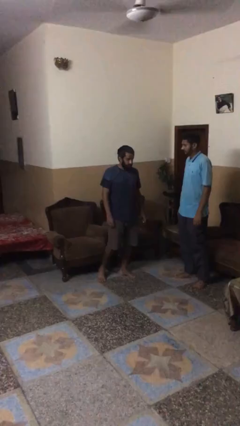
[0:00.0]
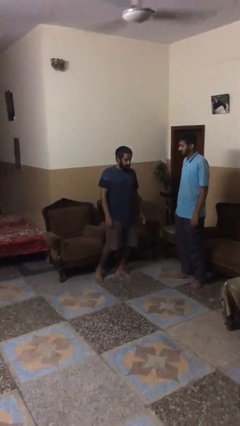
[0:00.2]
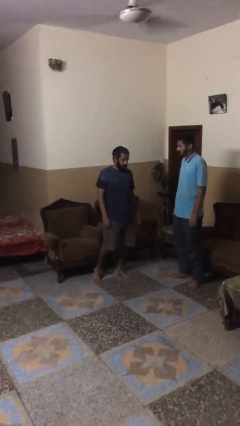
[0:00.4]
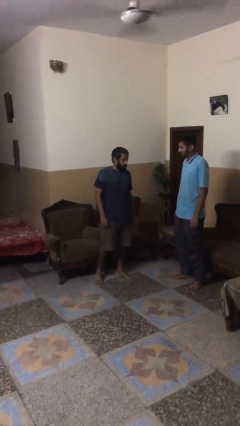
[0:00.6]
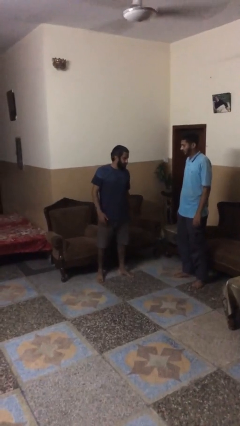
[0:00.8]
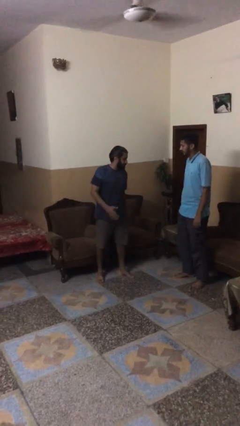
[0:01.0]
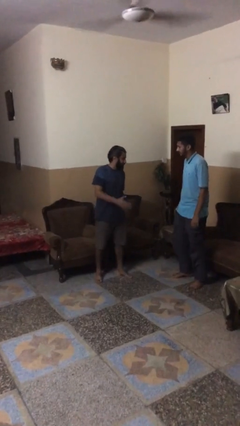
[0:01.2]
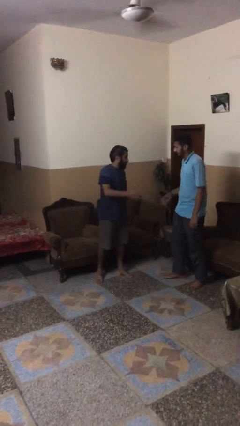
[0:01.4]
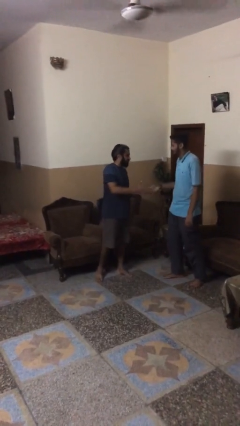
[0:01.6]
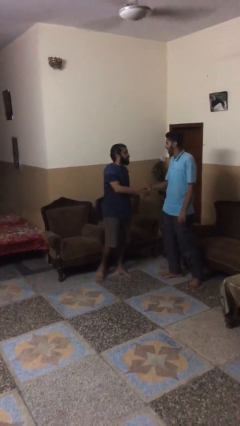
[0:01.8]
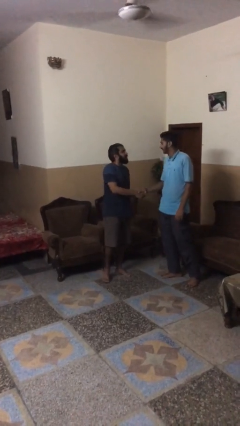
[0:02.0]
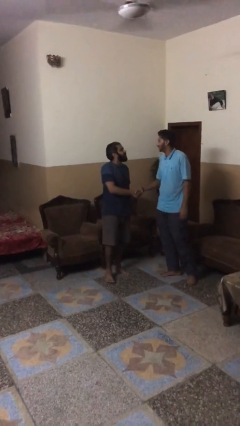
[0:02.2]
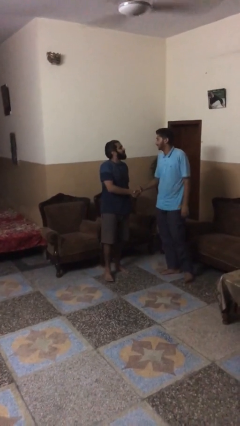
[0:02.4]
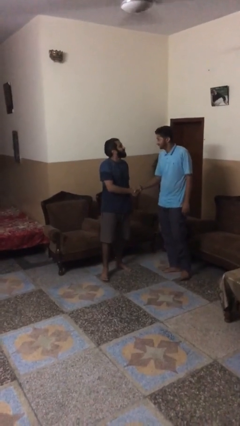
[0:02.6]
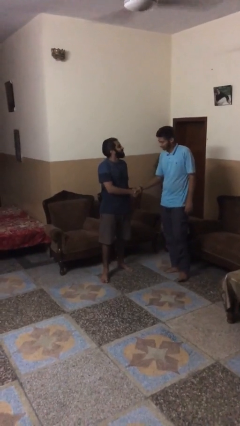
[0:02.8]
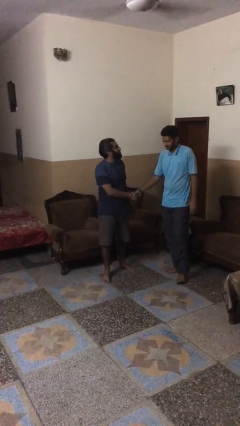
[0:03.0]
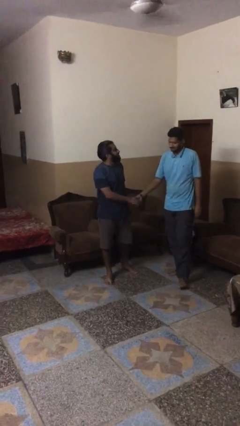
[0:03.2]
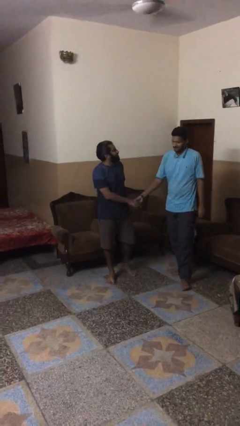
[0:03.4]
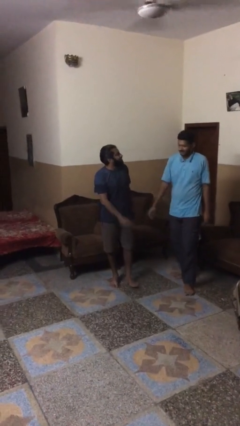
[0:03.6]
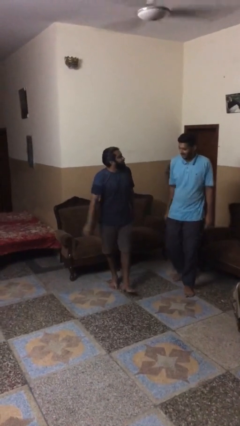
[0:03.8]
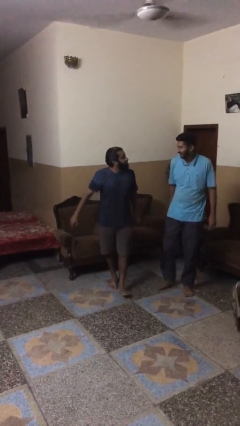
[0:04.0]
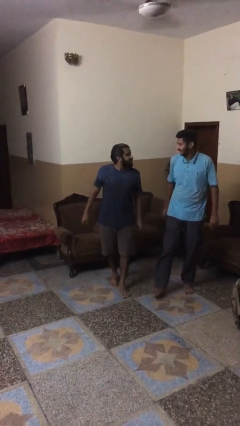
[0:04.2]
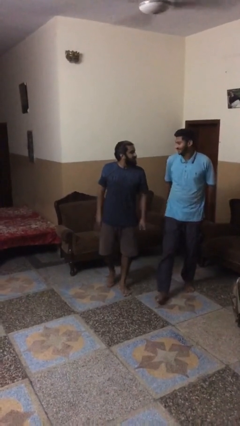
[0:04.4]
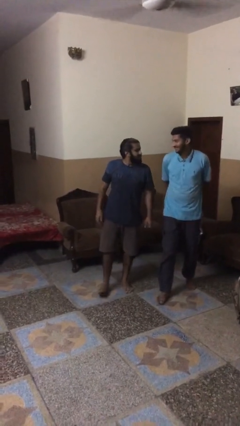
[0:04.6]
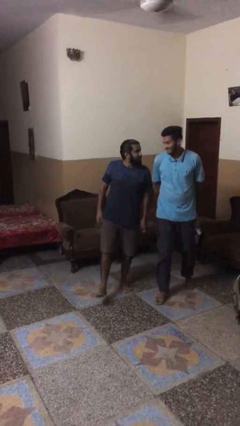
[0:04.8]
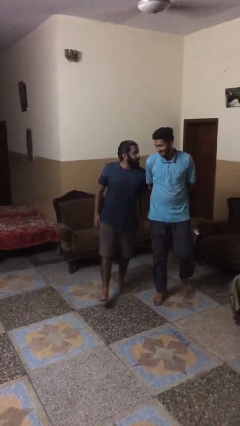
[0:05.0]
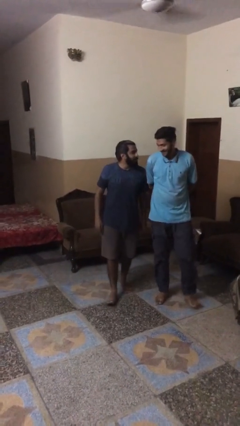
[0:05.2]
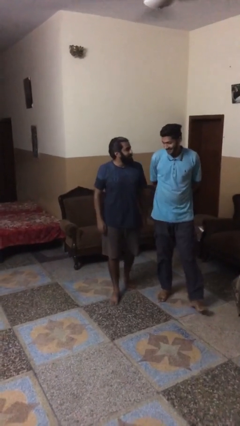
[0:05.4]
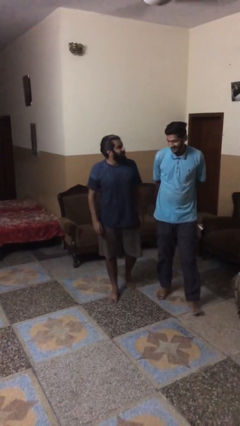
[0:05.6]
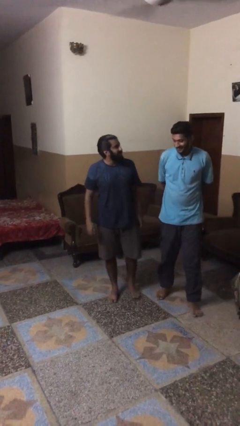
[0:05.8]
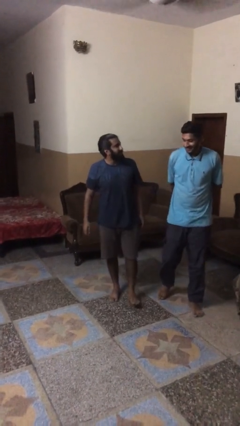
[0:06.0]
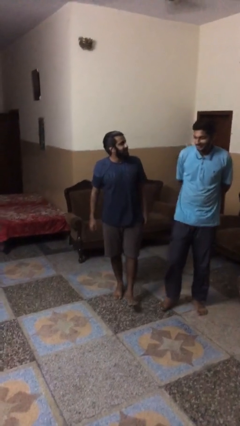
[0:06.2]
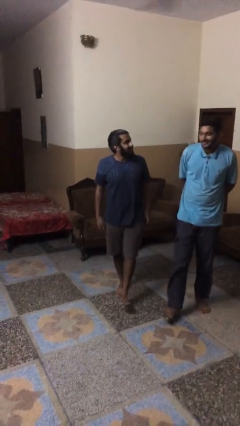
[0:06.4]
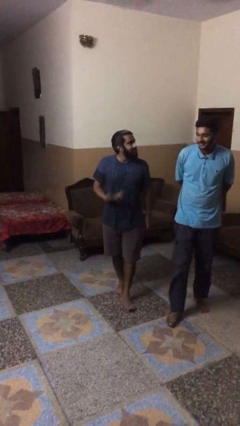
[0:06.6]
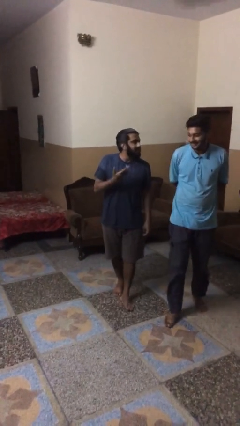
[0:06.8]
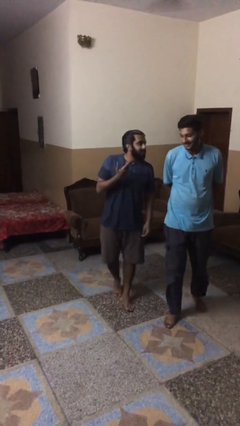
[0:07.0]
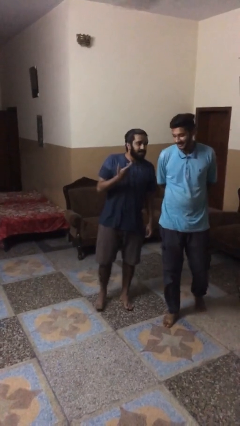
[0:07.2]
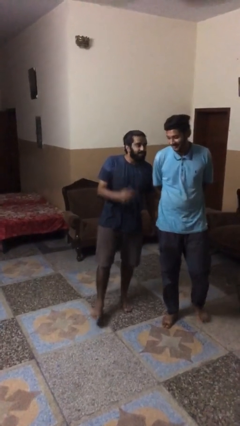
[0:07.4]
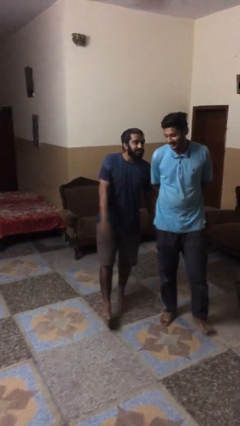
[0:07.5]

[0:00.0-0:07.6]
person shakes hand

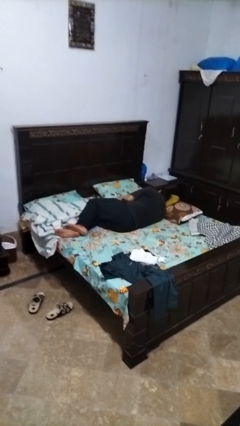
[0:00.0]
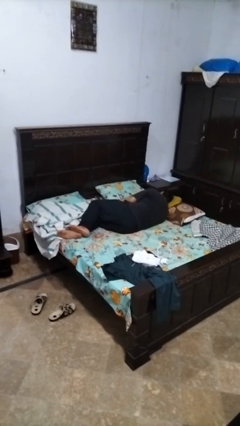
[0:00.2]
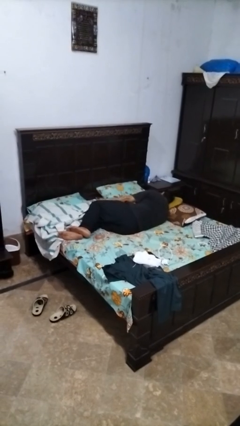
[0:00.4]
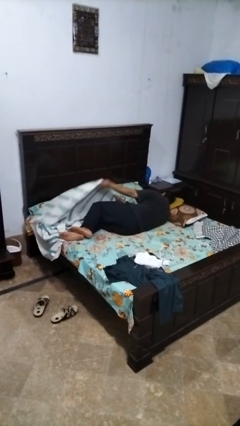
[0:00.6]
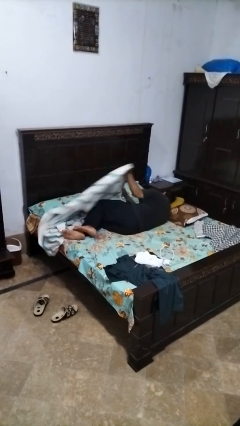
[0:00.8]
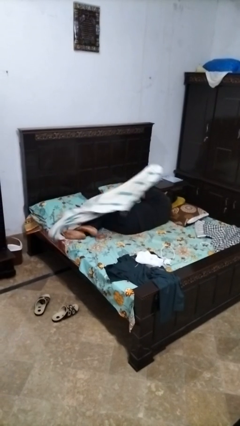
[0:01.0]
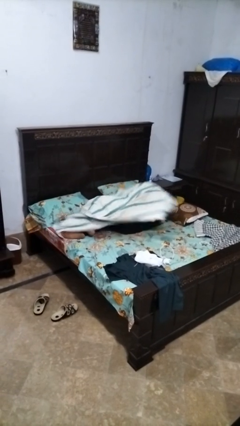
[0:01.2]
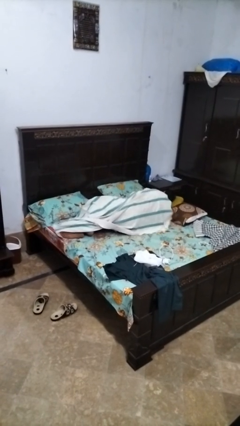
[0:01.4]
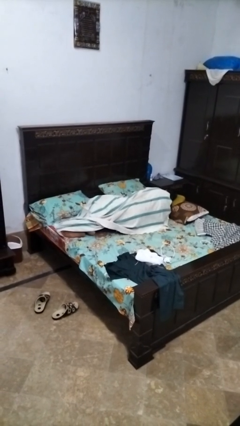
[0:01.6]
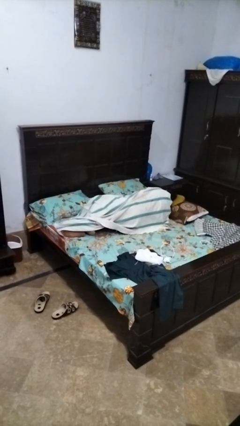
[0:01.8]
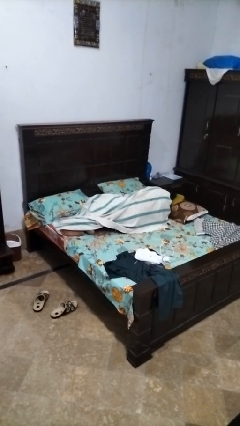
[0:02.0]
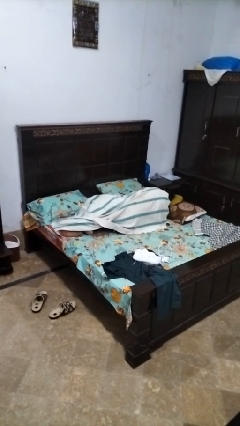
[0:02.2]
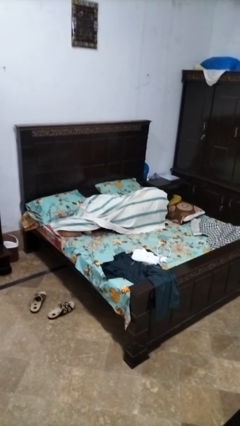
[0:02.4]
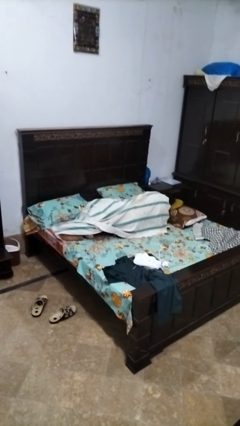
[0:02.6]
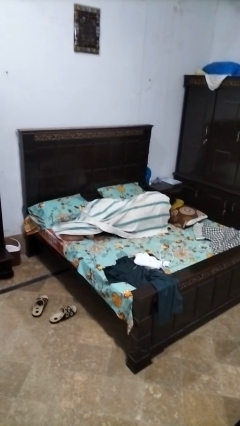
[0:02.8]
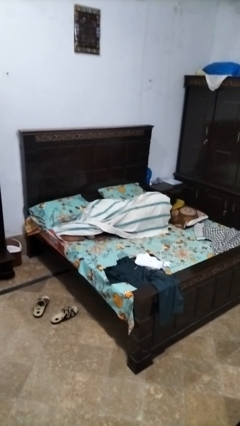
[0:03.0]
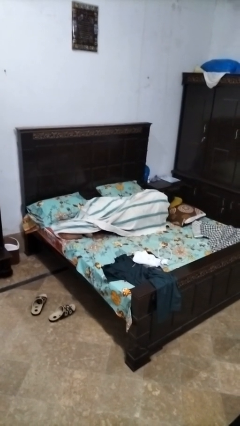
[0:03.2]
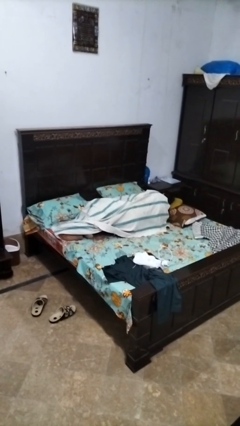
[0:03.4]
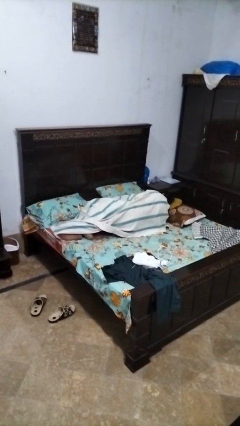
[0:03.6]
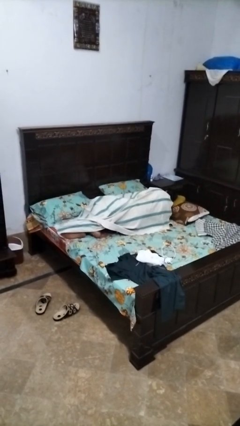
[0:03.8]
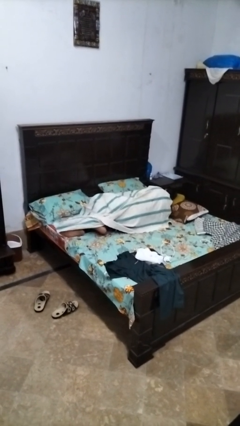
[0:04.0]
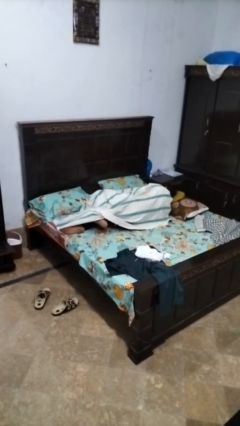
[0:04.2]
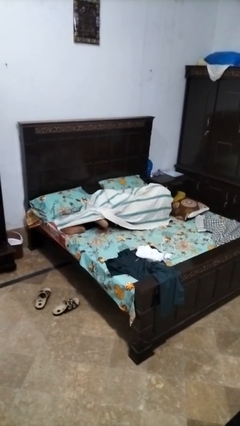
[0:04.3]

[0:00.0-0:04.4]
person covers with bedsheets

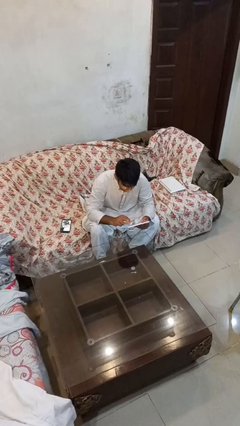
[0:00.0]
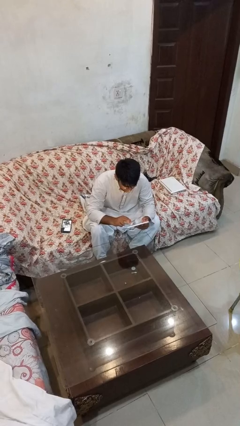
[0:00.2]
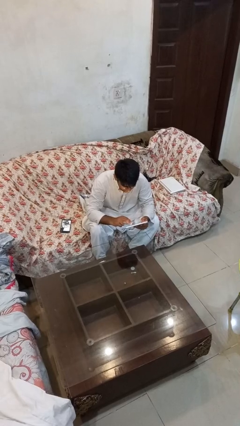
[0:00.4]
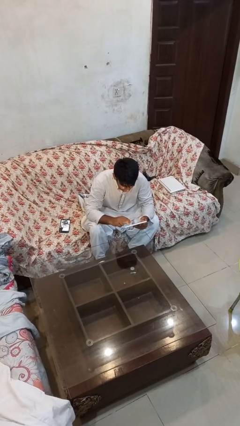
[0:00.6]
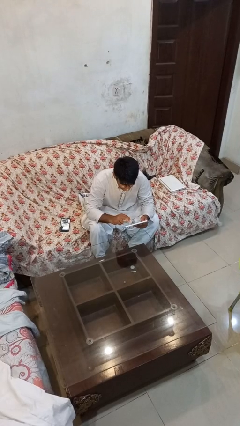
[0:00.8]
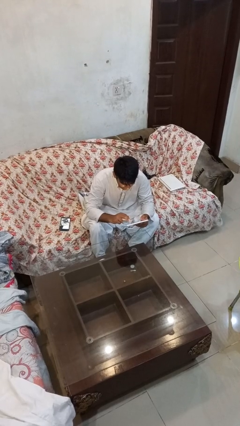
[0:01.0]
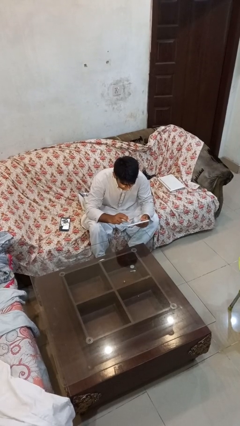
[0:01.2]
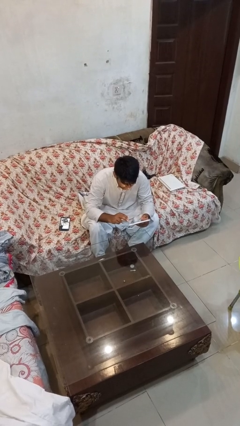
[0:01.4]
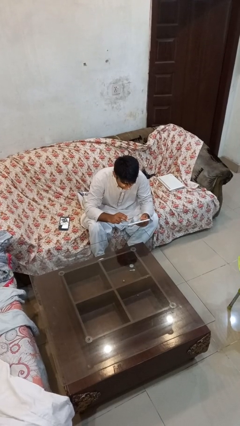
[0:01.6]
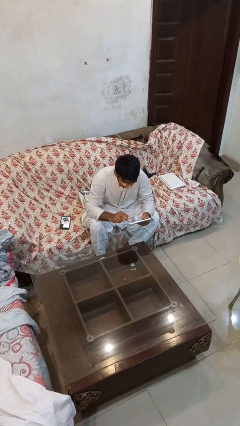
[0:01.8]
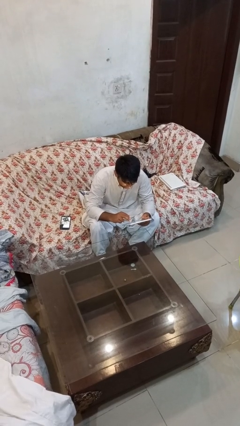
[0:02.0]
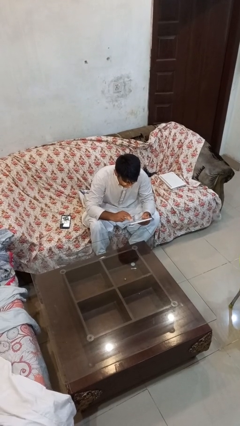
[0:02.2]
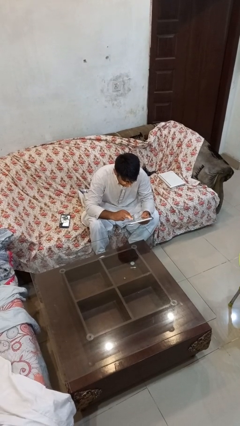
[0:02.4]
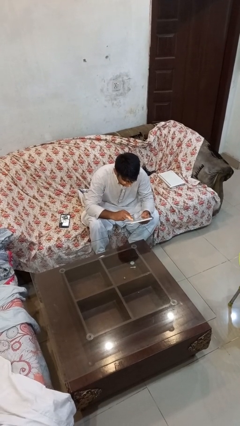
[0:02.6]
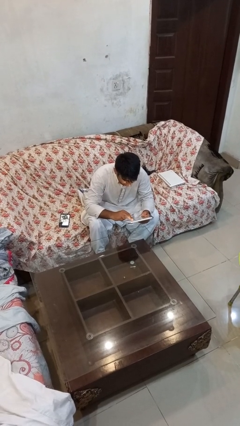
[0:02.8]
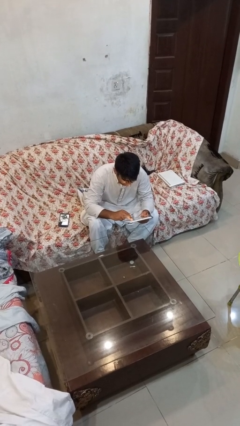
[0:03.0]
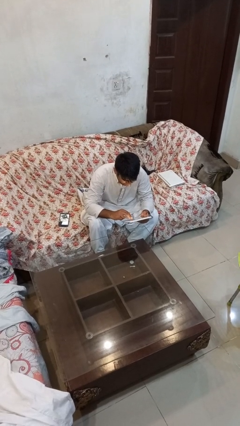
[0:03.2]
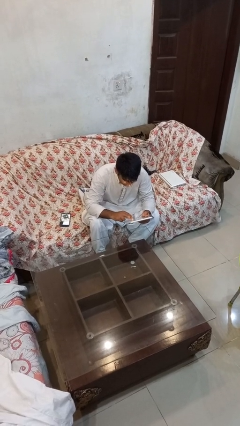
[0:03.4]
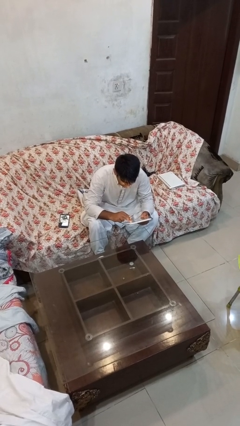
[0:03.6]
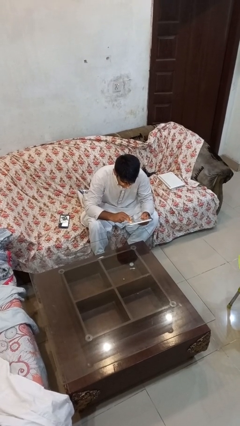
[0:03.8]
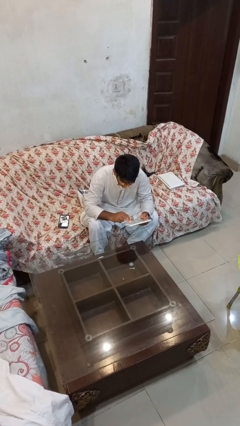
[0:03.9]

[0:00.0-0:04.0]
person interacts with tablet

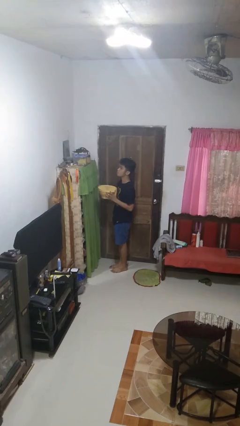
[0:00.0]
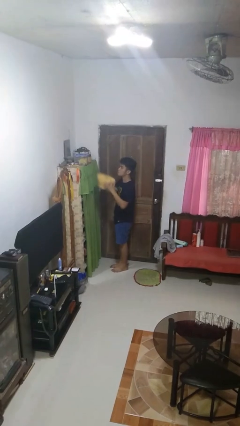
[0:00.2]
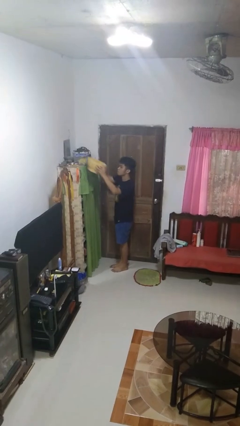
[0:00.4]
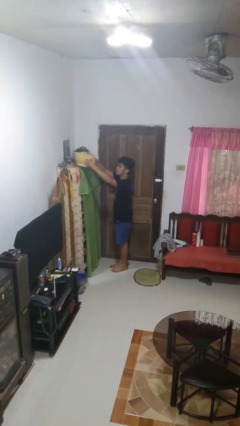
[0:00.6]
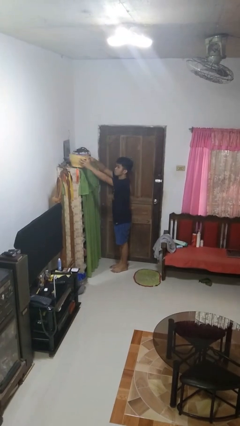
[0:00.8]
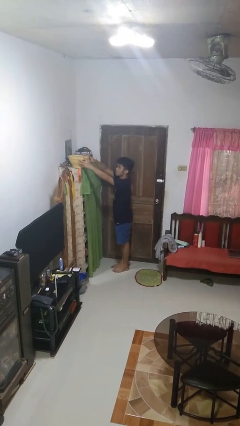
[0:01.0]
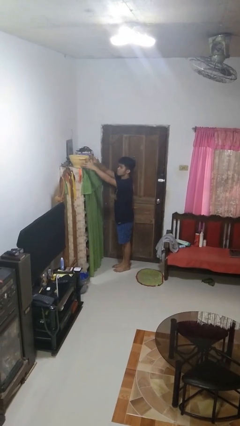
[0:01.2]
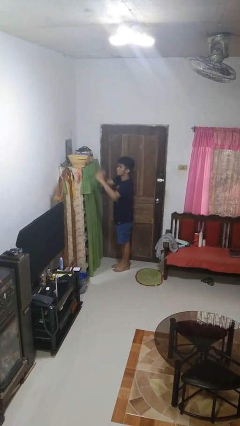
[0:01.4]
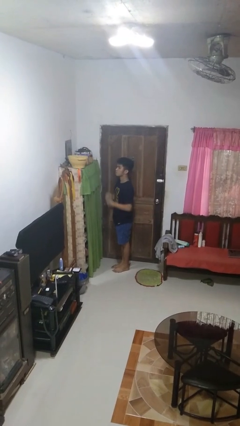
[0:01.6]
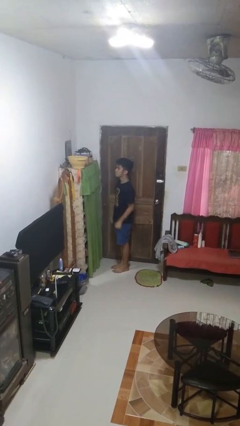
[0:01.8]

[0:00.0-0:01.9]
person puts down object on shelf
